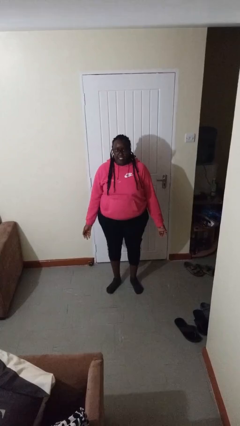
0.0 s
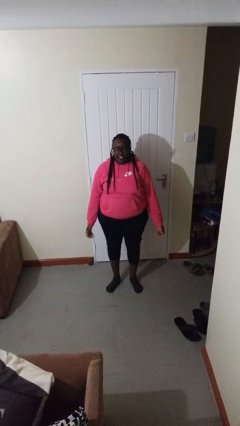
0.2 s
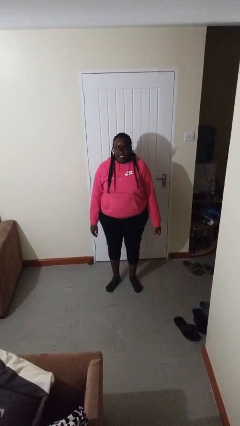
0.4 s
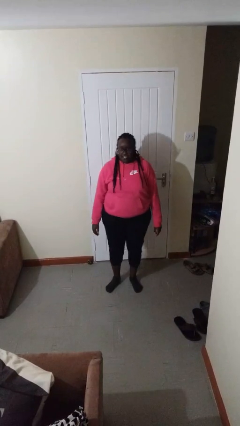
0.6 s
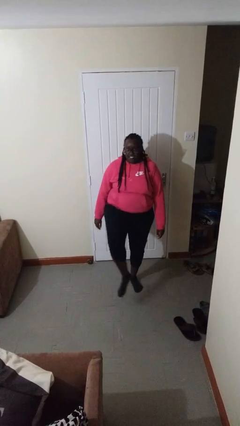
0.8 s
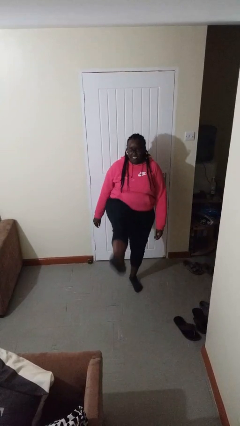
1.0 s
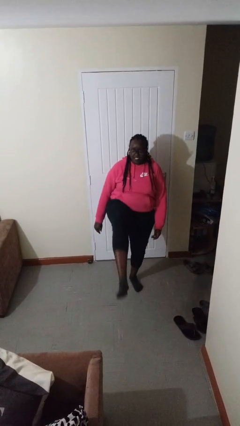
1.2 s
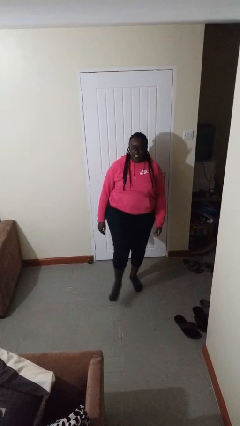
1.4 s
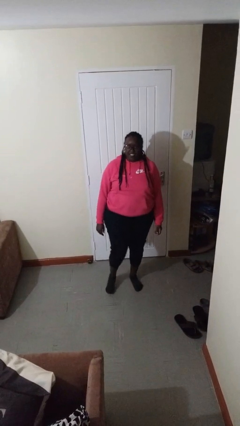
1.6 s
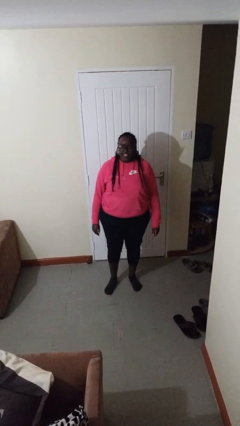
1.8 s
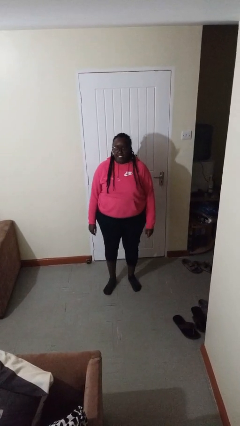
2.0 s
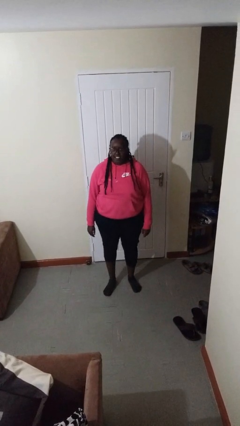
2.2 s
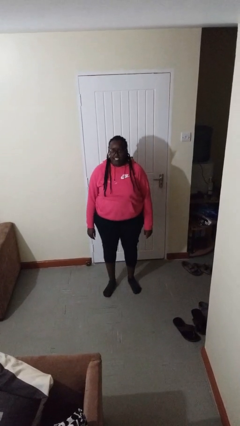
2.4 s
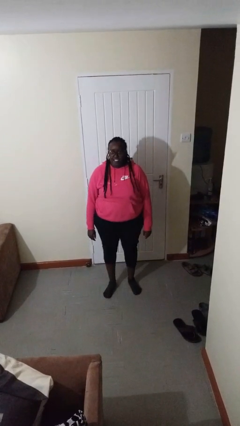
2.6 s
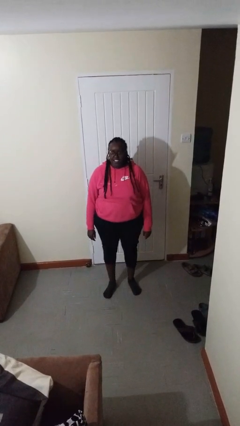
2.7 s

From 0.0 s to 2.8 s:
person karate kicks

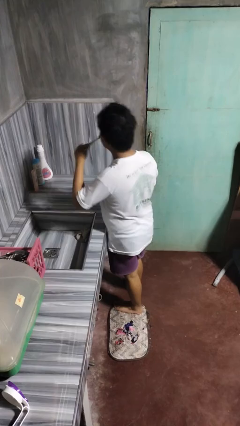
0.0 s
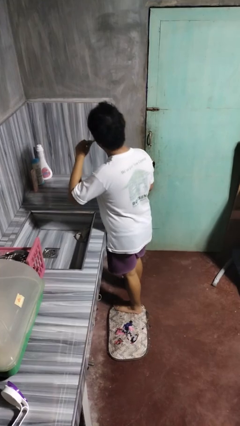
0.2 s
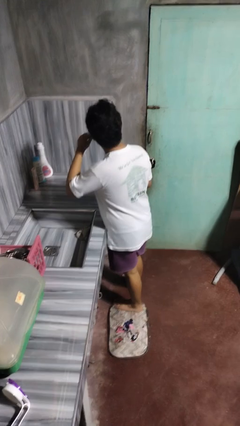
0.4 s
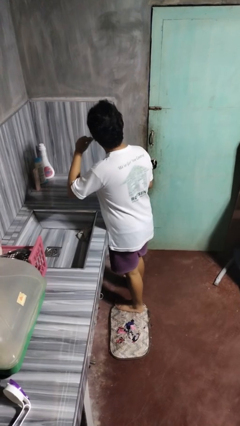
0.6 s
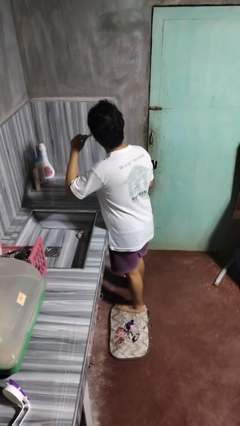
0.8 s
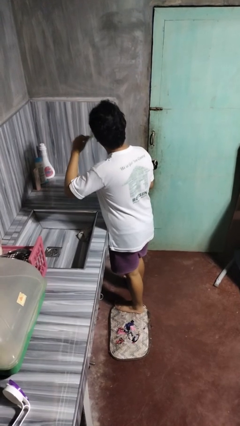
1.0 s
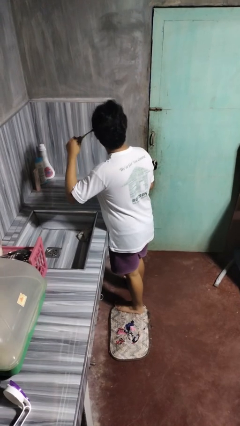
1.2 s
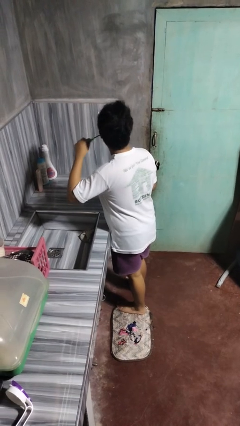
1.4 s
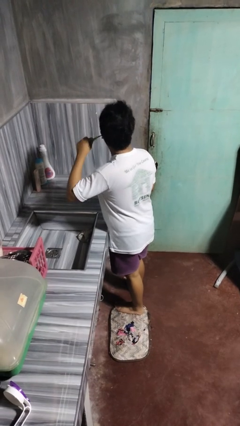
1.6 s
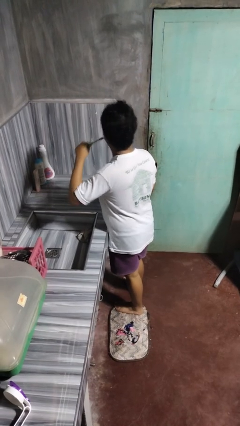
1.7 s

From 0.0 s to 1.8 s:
person brushes teeth

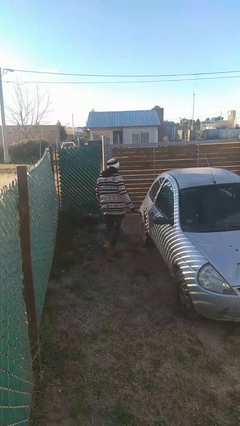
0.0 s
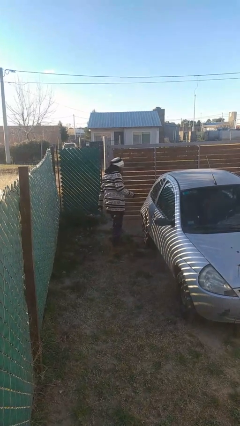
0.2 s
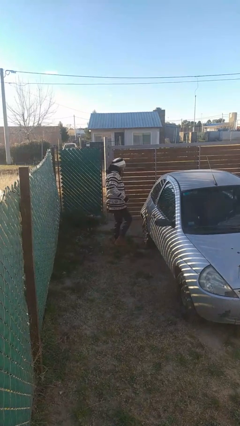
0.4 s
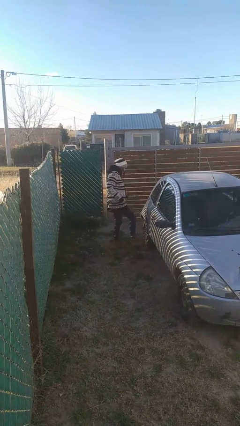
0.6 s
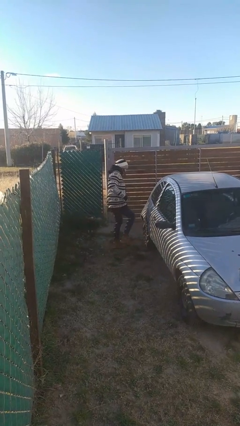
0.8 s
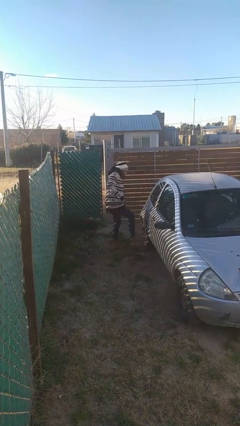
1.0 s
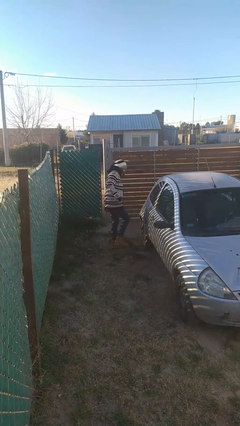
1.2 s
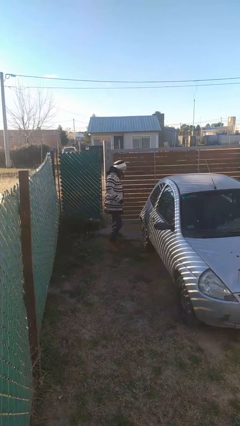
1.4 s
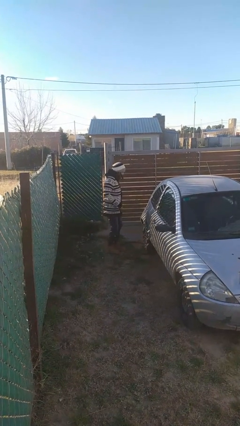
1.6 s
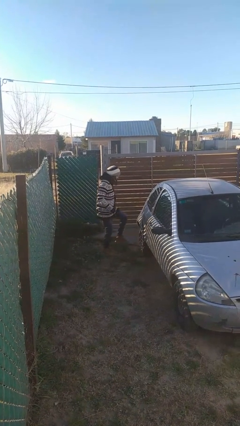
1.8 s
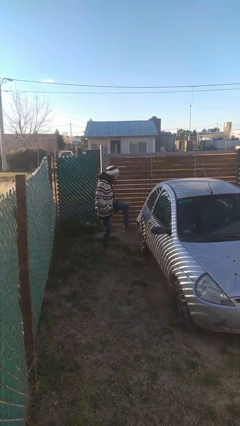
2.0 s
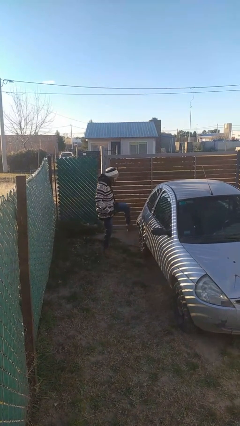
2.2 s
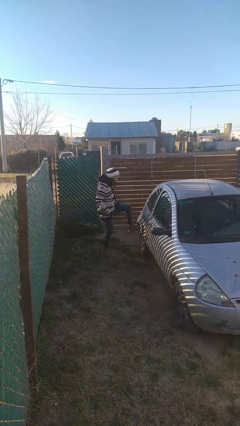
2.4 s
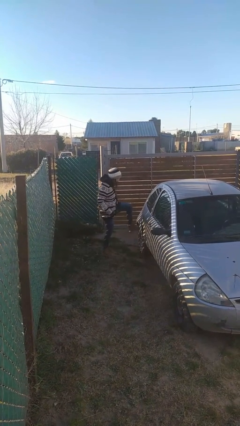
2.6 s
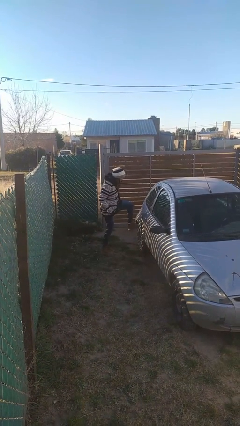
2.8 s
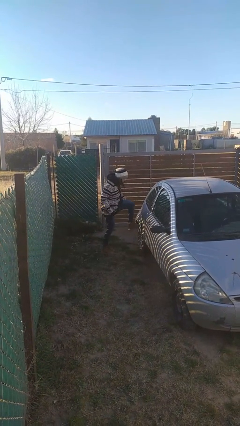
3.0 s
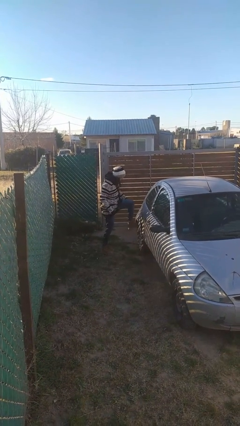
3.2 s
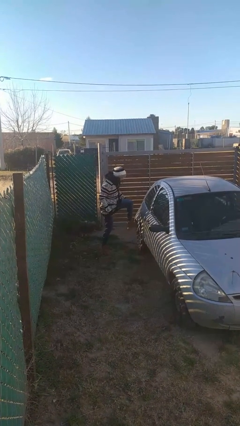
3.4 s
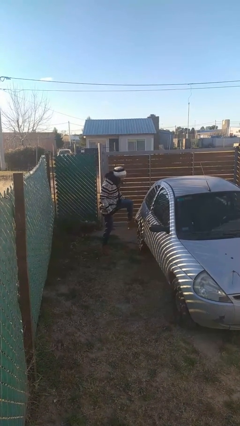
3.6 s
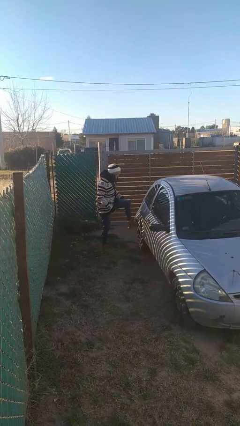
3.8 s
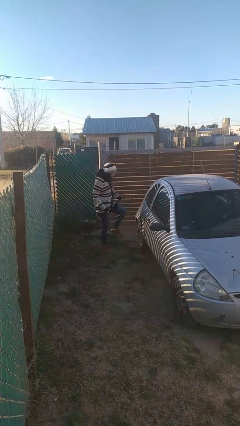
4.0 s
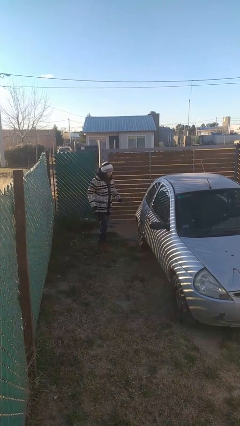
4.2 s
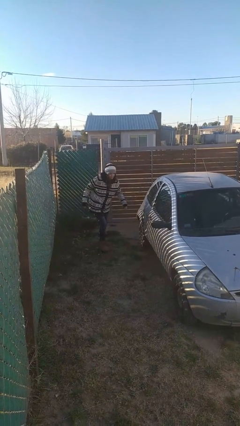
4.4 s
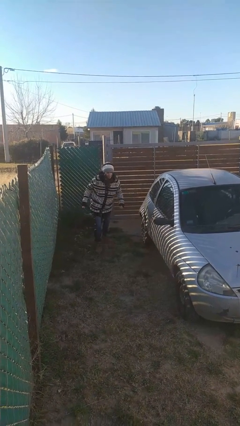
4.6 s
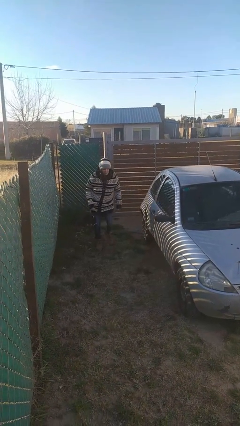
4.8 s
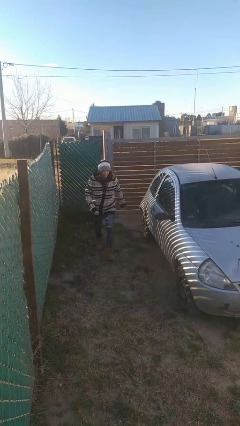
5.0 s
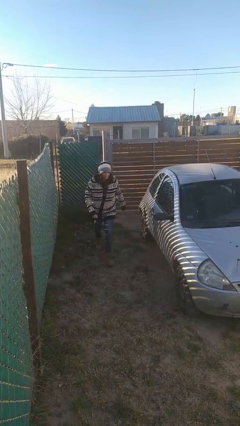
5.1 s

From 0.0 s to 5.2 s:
person kicks car tires

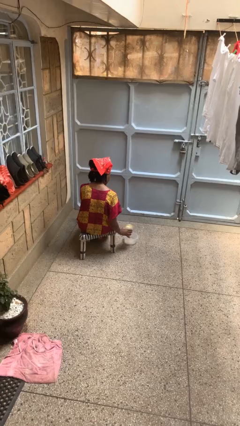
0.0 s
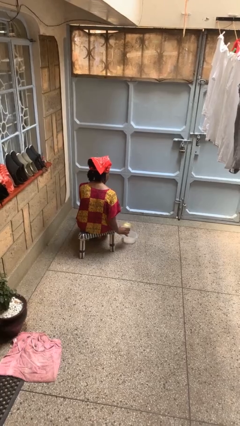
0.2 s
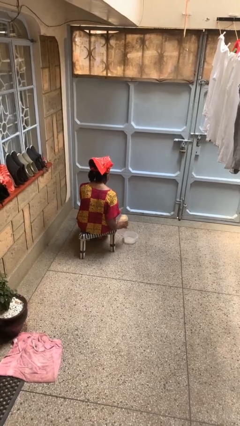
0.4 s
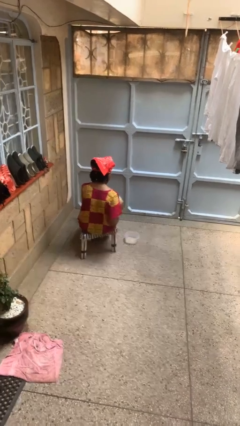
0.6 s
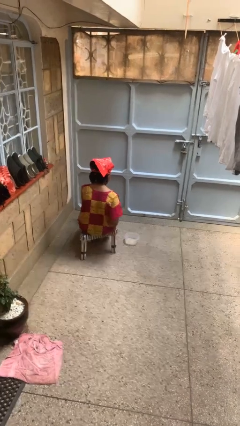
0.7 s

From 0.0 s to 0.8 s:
person pours into bowl

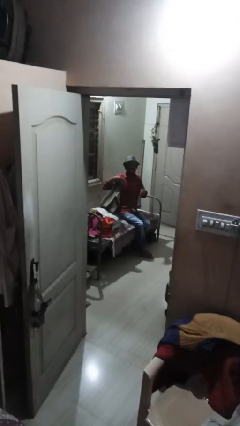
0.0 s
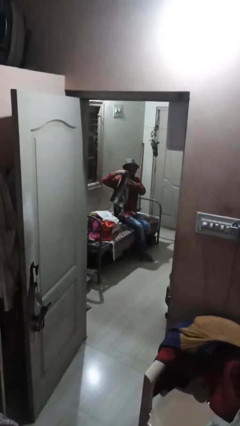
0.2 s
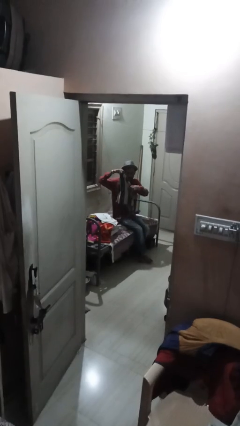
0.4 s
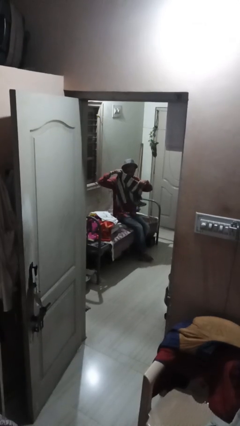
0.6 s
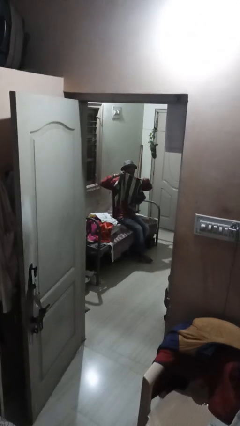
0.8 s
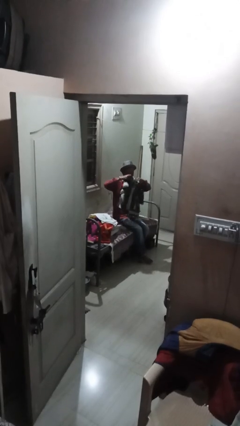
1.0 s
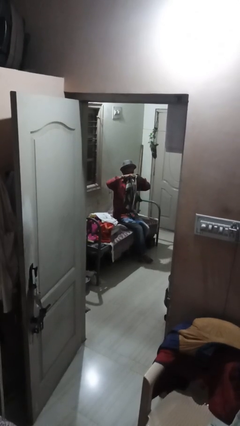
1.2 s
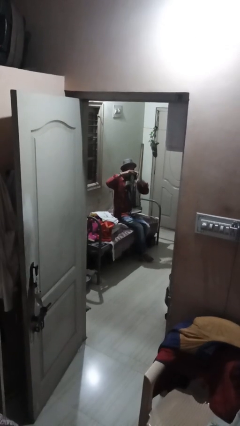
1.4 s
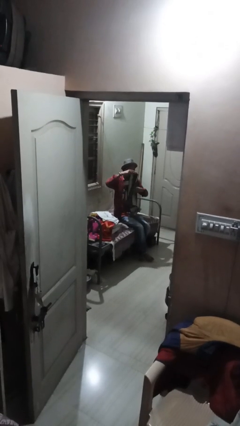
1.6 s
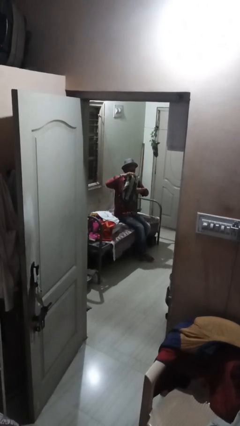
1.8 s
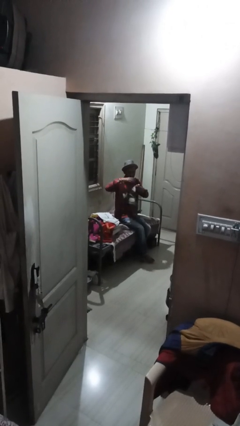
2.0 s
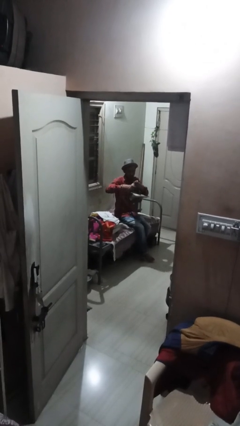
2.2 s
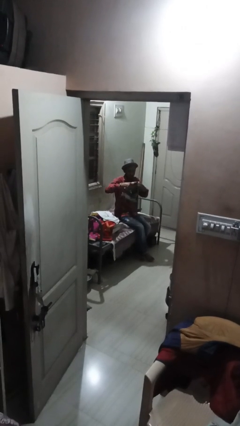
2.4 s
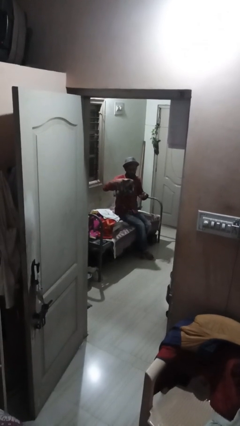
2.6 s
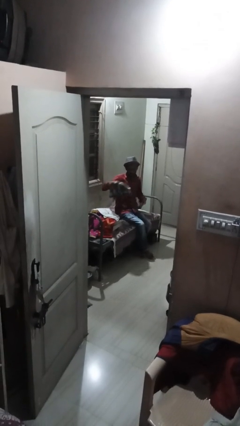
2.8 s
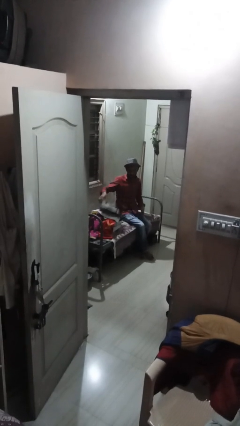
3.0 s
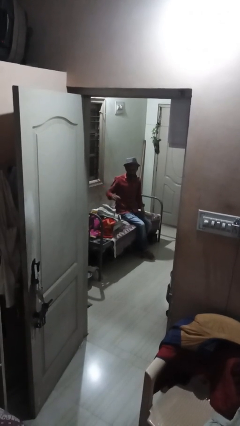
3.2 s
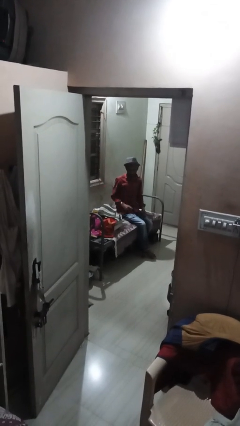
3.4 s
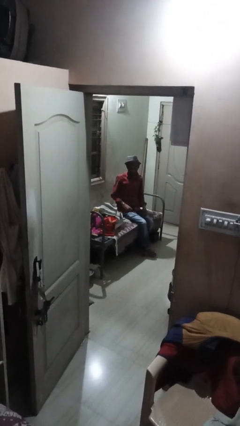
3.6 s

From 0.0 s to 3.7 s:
person folds shirt

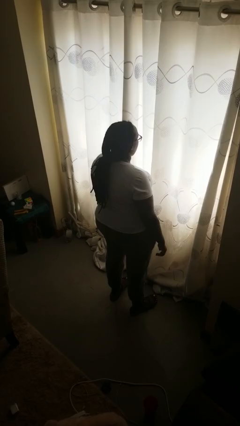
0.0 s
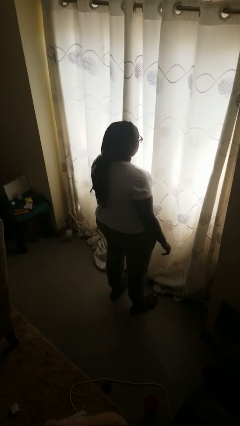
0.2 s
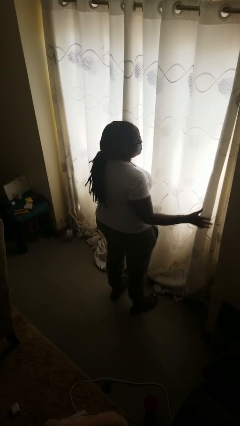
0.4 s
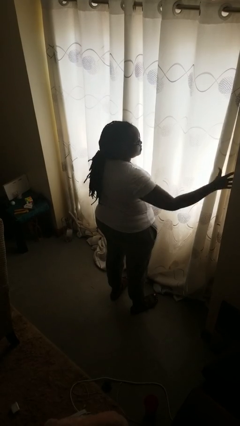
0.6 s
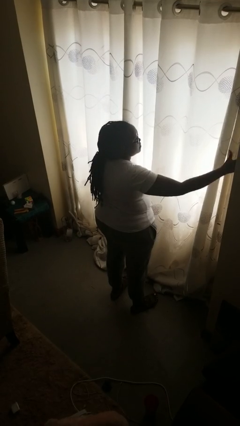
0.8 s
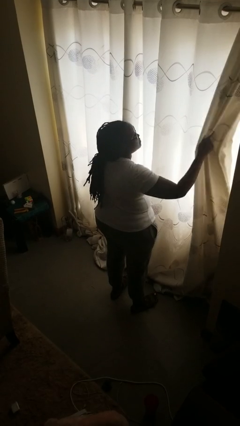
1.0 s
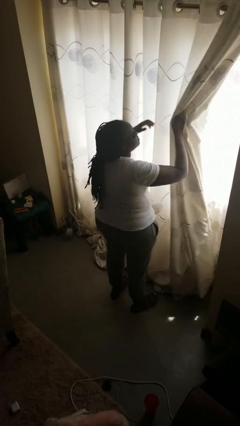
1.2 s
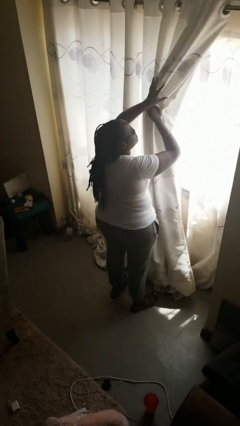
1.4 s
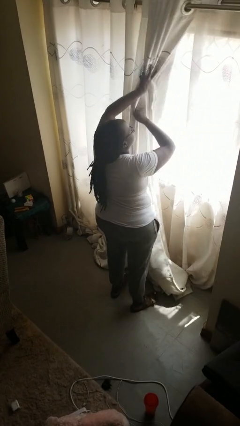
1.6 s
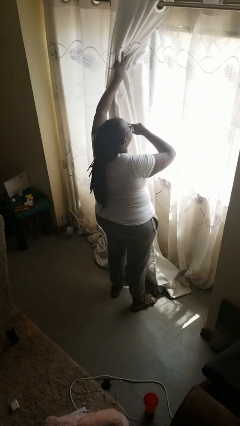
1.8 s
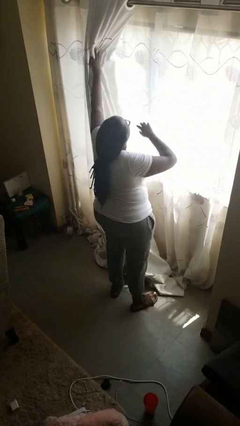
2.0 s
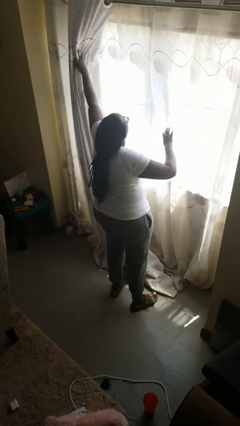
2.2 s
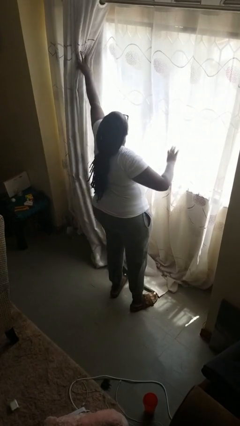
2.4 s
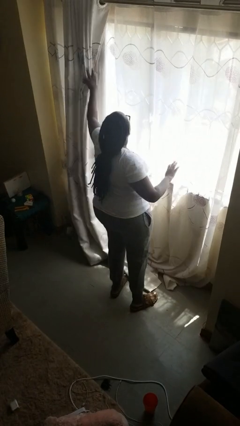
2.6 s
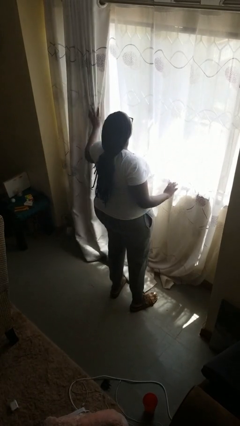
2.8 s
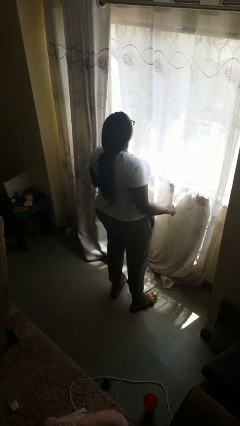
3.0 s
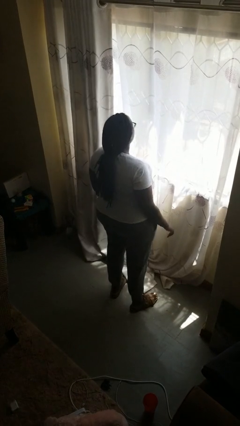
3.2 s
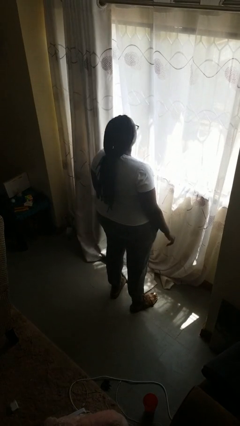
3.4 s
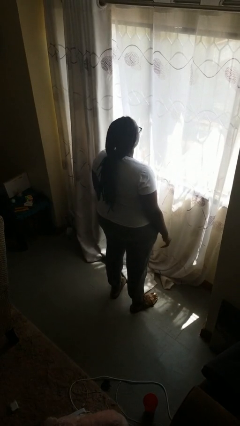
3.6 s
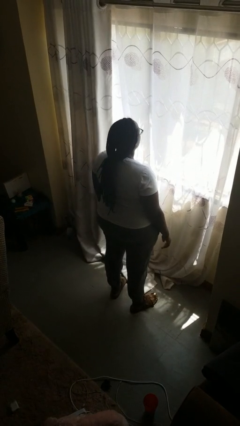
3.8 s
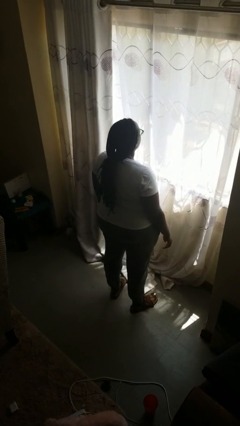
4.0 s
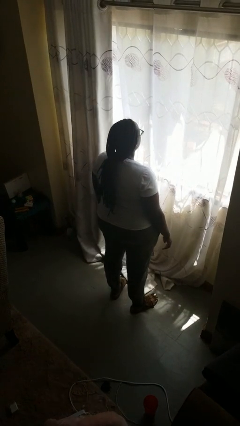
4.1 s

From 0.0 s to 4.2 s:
person opens curtains
